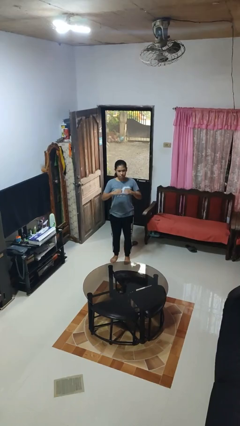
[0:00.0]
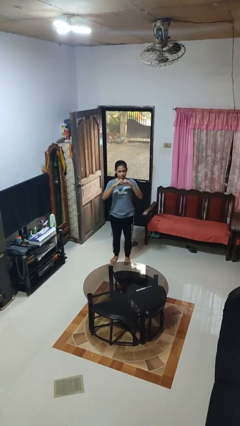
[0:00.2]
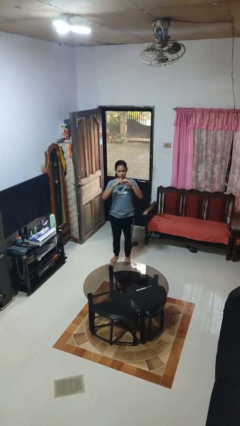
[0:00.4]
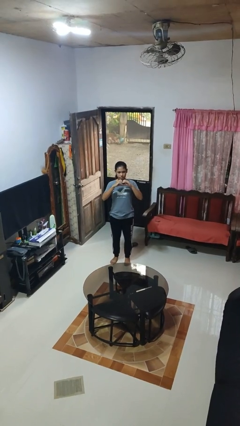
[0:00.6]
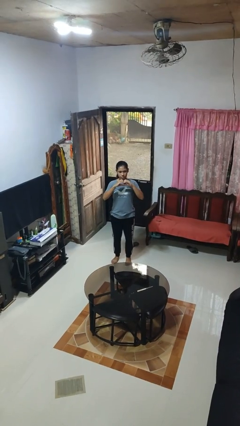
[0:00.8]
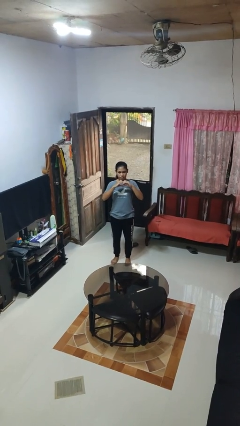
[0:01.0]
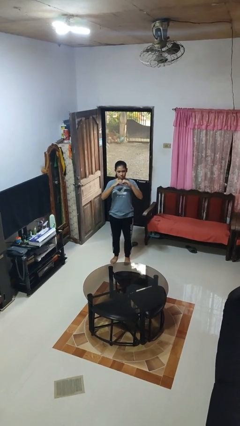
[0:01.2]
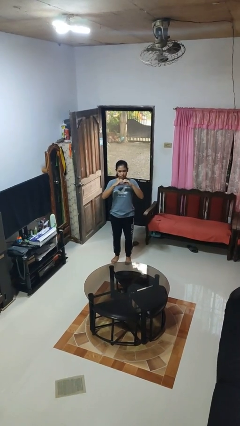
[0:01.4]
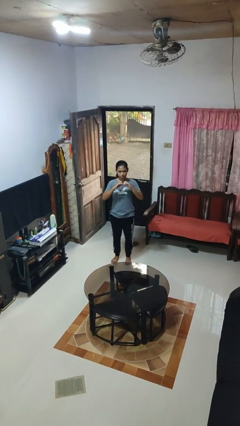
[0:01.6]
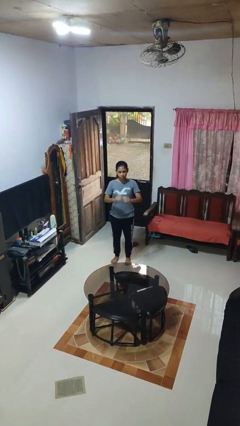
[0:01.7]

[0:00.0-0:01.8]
person gestures heart

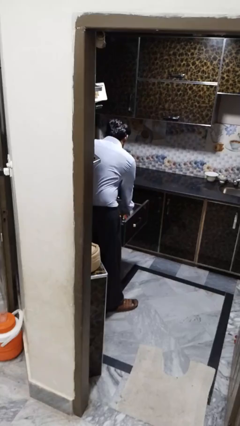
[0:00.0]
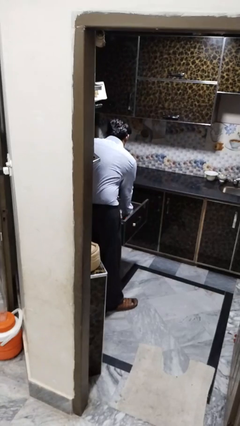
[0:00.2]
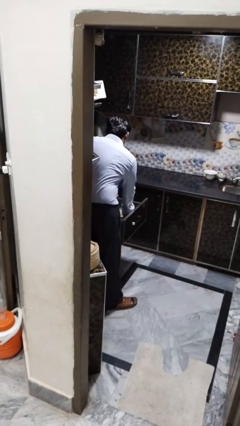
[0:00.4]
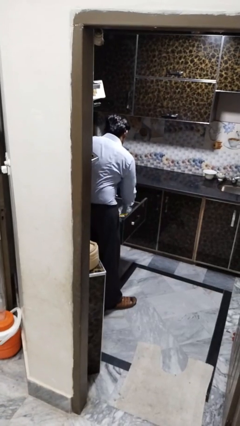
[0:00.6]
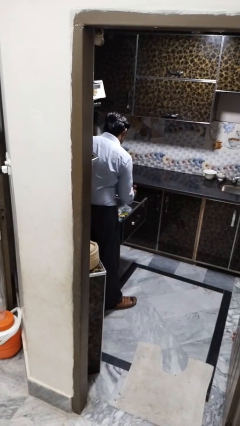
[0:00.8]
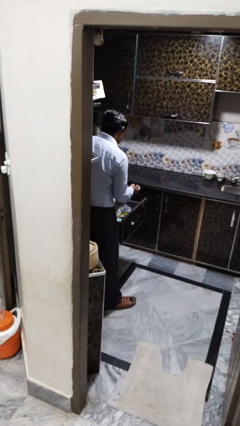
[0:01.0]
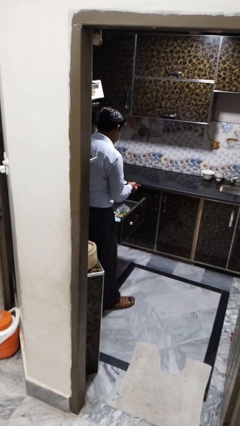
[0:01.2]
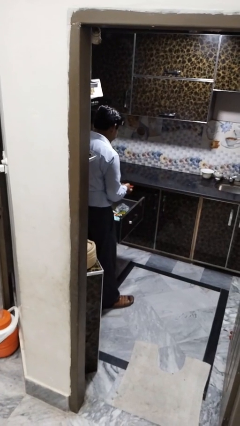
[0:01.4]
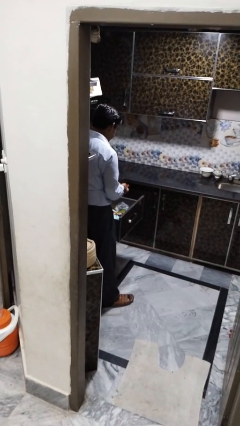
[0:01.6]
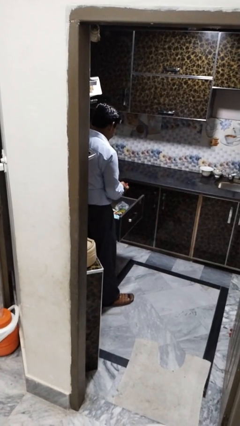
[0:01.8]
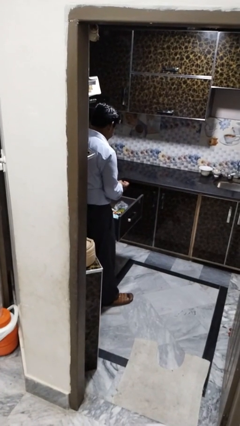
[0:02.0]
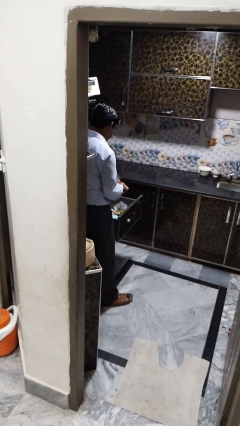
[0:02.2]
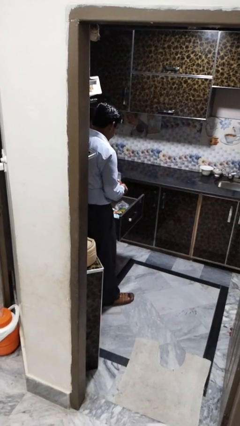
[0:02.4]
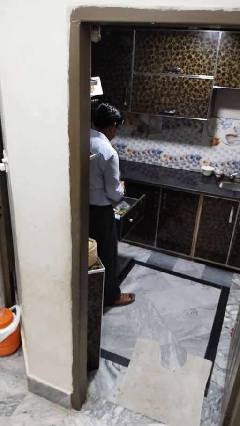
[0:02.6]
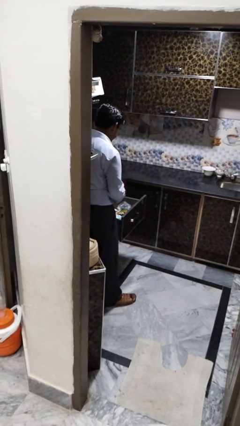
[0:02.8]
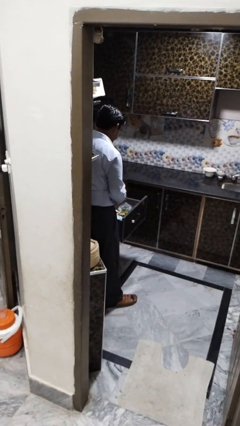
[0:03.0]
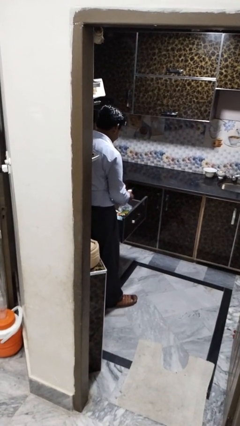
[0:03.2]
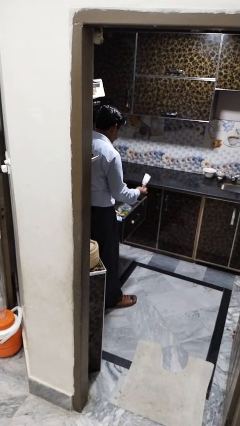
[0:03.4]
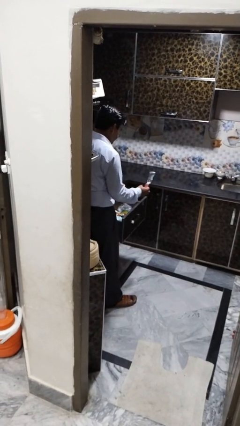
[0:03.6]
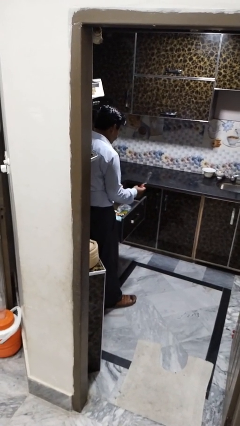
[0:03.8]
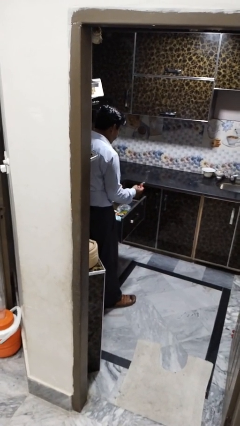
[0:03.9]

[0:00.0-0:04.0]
person takes object from kitchen drawer

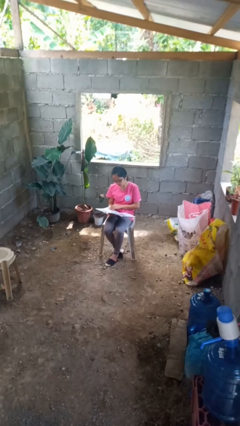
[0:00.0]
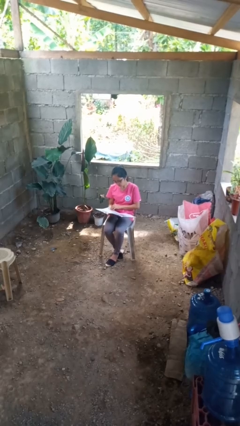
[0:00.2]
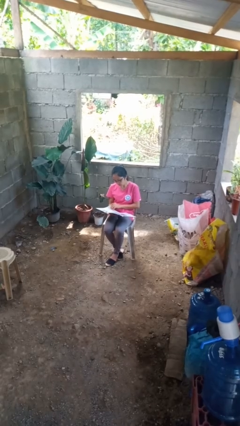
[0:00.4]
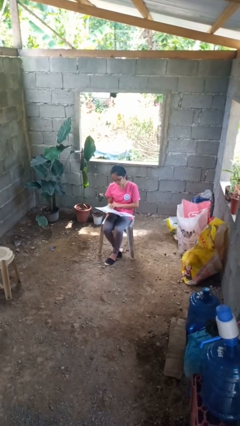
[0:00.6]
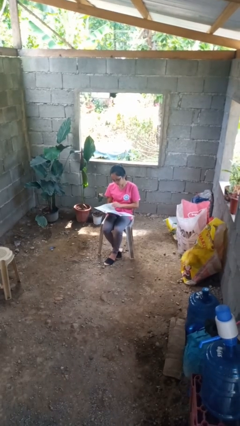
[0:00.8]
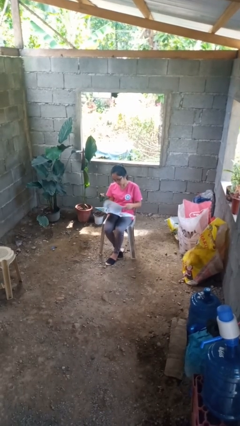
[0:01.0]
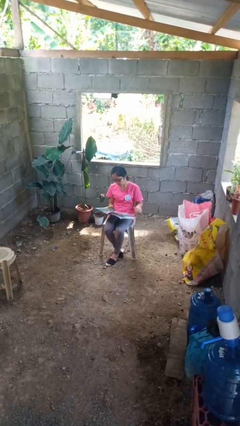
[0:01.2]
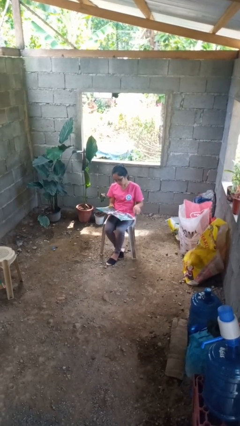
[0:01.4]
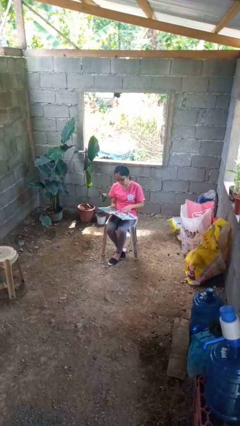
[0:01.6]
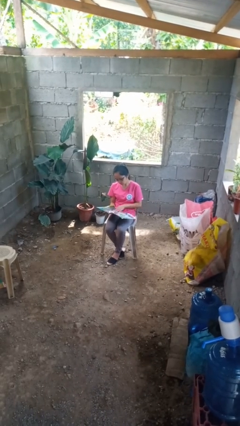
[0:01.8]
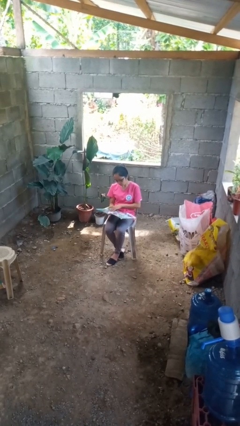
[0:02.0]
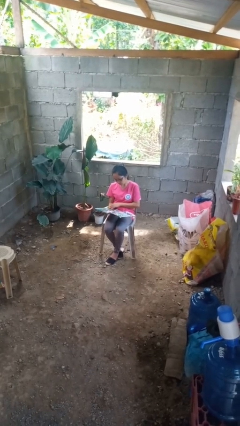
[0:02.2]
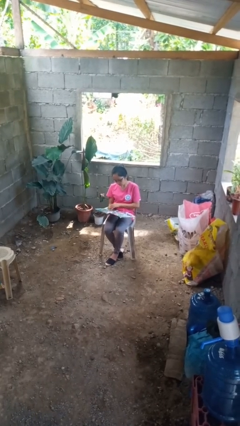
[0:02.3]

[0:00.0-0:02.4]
person reads magazine

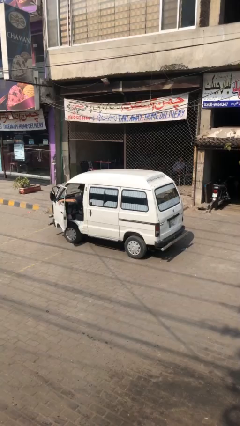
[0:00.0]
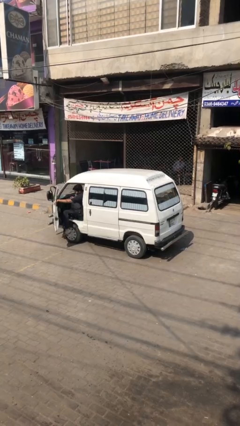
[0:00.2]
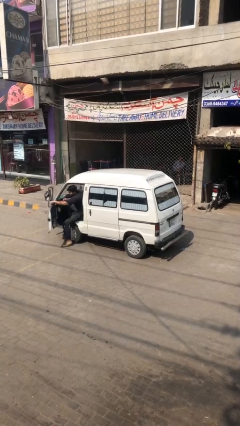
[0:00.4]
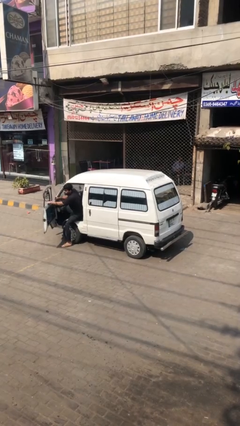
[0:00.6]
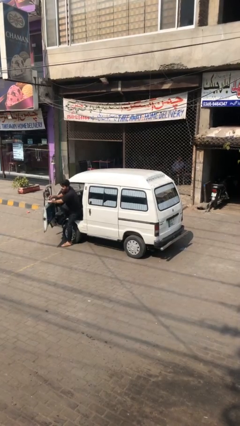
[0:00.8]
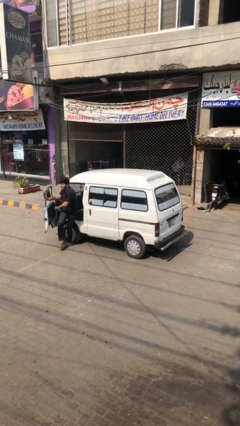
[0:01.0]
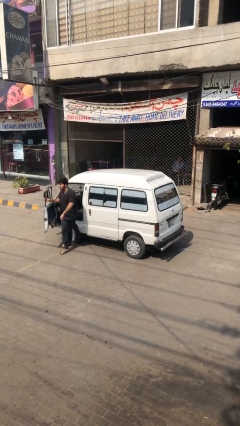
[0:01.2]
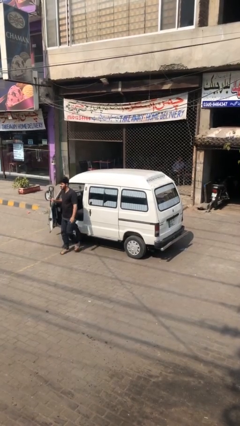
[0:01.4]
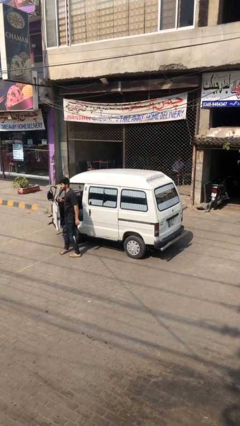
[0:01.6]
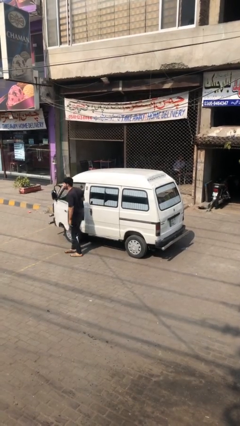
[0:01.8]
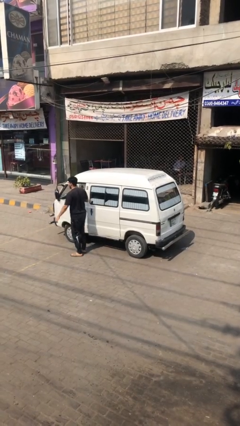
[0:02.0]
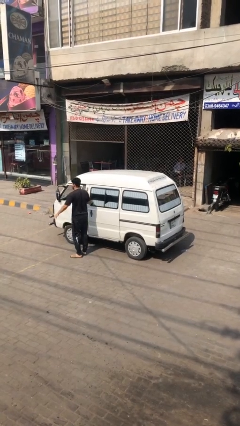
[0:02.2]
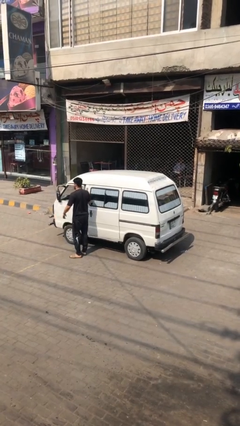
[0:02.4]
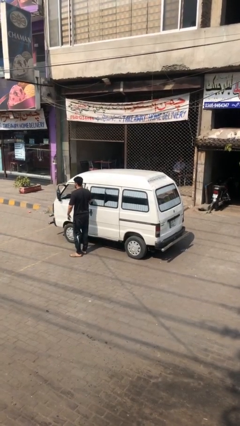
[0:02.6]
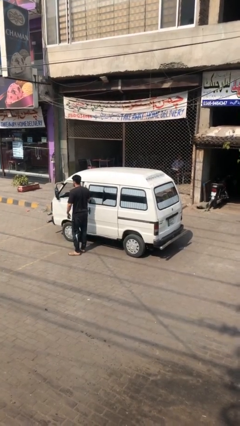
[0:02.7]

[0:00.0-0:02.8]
car drops off person

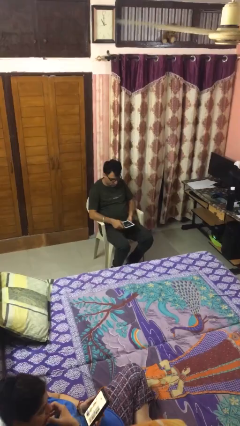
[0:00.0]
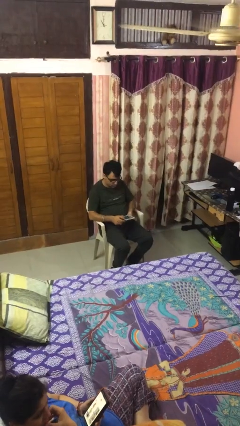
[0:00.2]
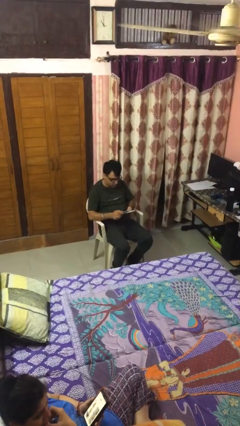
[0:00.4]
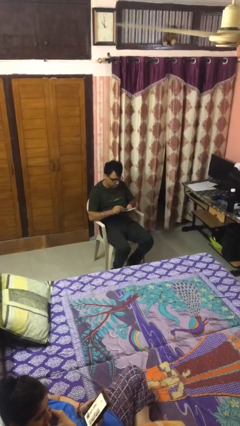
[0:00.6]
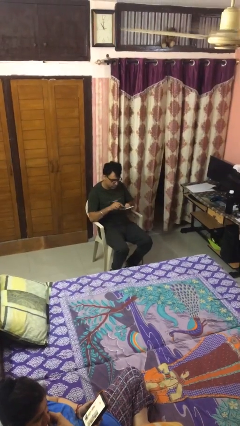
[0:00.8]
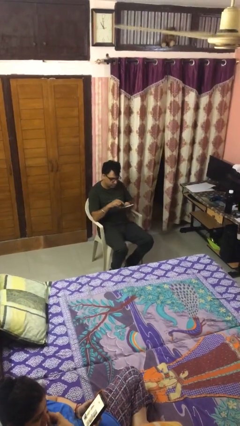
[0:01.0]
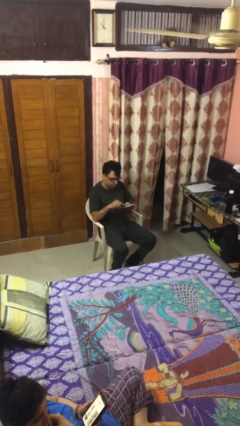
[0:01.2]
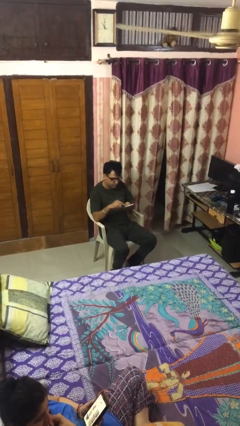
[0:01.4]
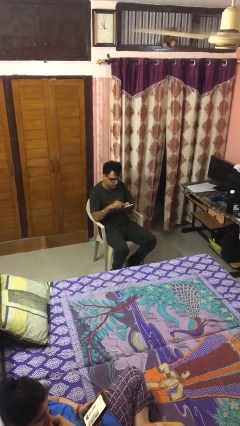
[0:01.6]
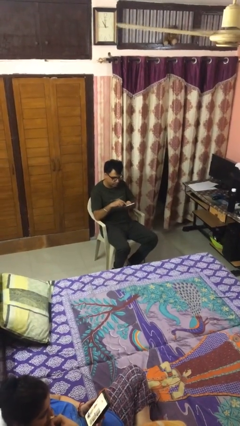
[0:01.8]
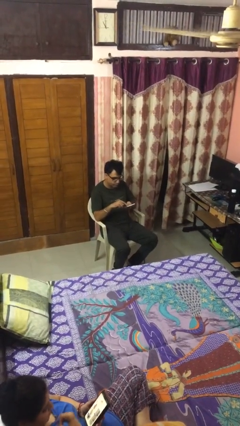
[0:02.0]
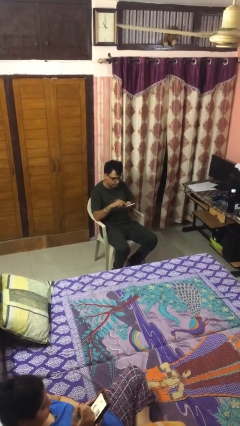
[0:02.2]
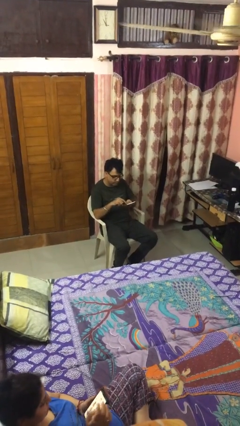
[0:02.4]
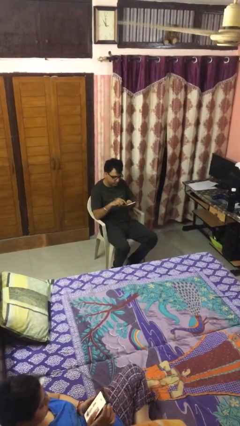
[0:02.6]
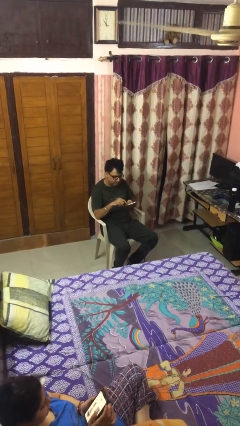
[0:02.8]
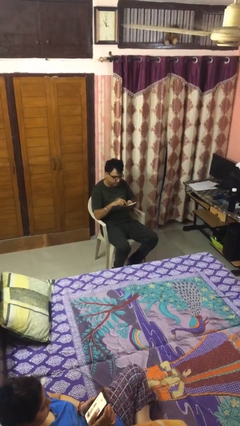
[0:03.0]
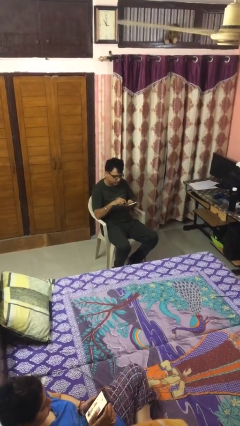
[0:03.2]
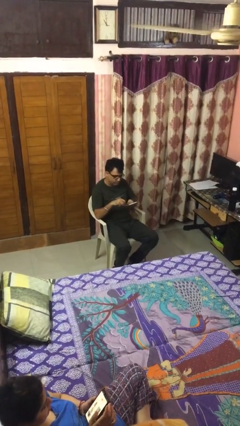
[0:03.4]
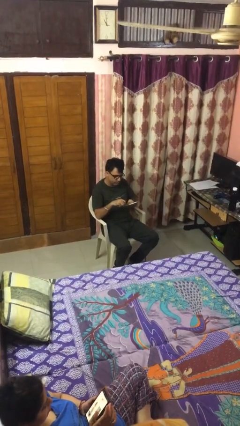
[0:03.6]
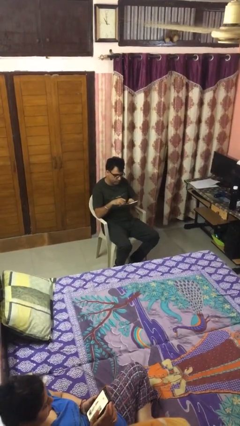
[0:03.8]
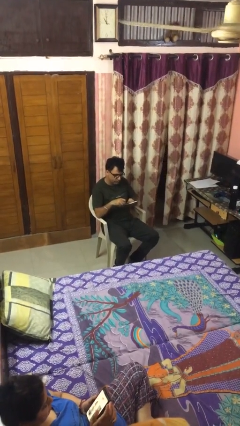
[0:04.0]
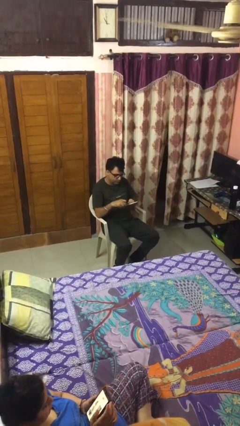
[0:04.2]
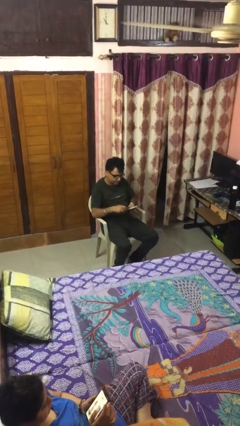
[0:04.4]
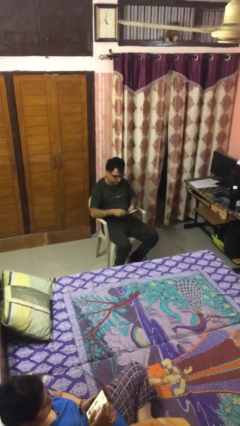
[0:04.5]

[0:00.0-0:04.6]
person interacts with tablet

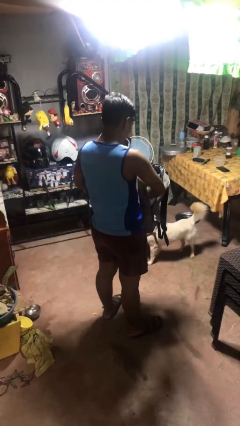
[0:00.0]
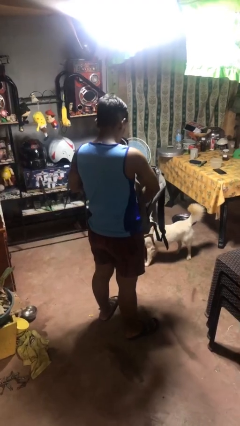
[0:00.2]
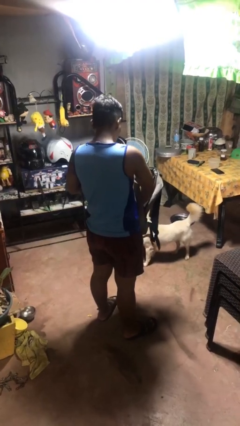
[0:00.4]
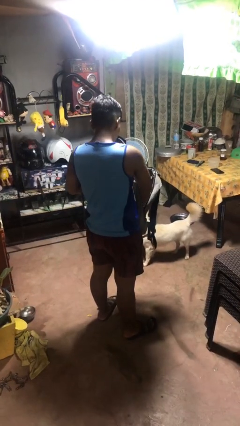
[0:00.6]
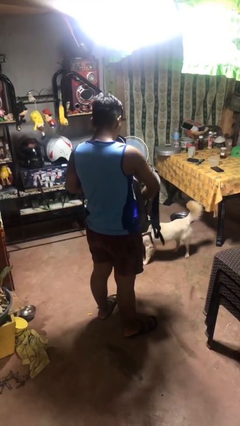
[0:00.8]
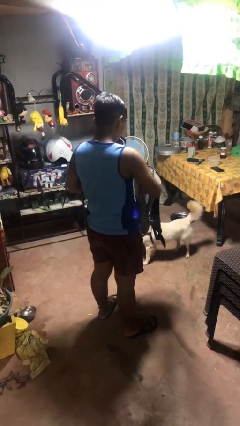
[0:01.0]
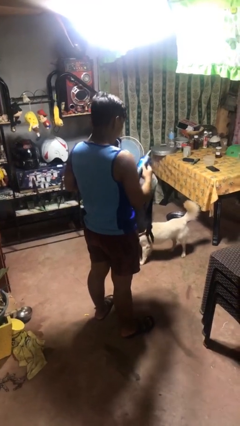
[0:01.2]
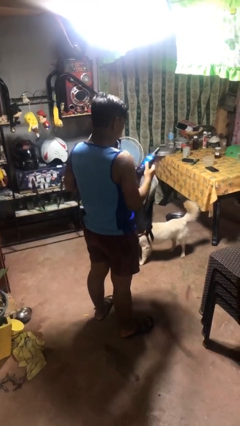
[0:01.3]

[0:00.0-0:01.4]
person takes object from bag

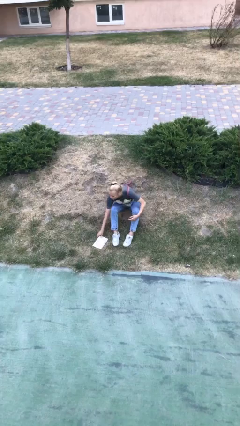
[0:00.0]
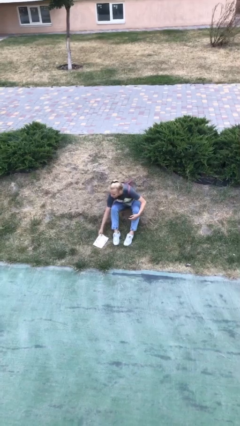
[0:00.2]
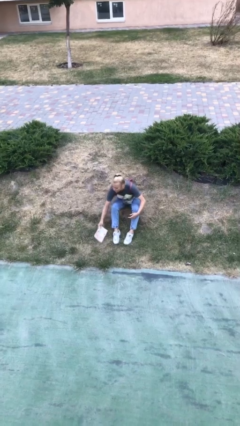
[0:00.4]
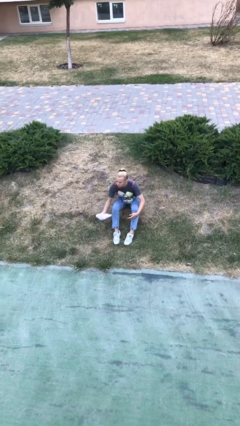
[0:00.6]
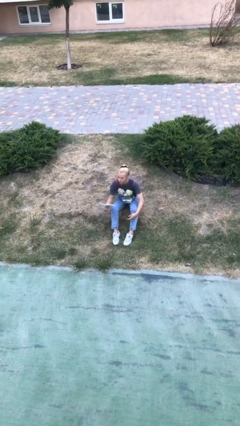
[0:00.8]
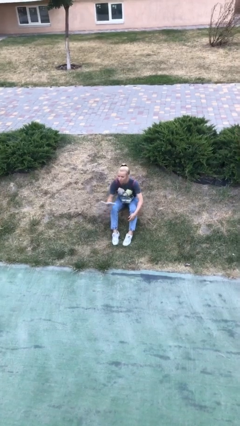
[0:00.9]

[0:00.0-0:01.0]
person picks up object from floor
